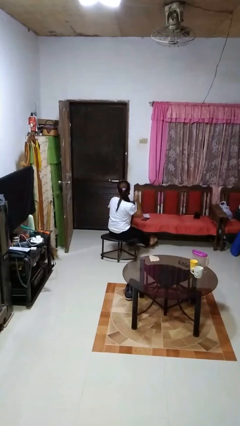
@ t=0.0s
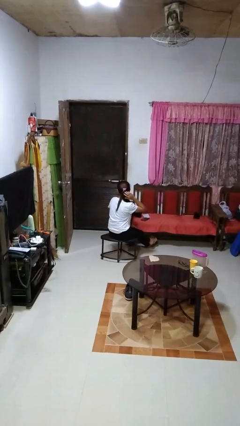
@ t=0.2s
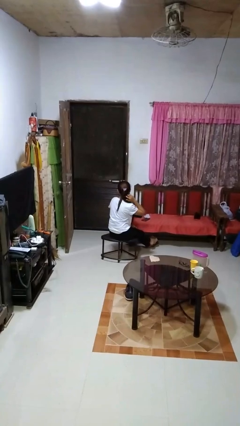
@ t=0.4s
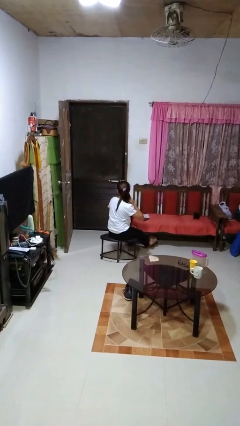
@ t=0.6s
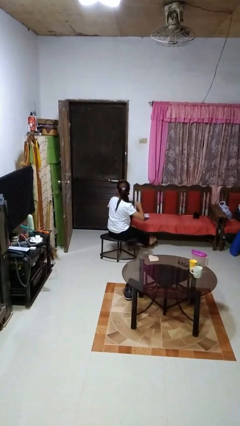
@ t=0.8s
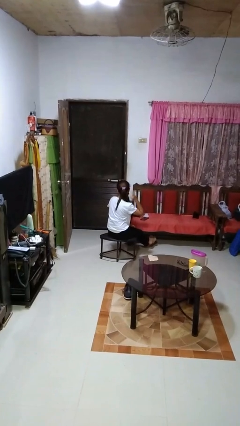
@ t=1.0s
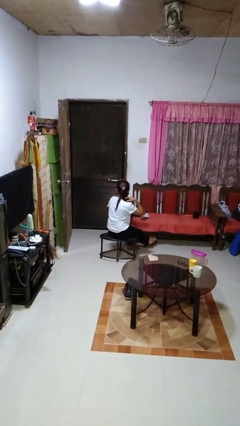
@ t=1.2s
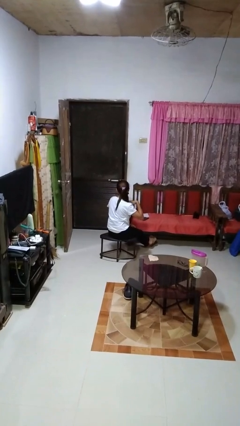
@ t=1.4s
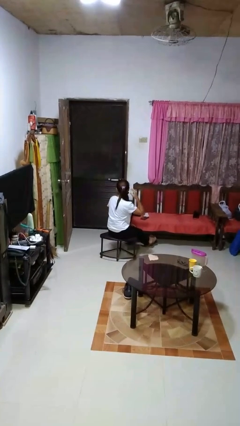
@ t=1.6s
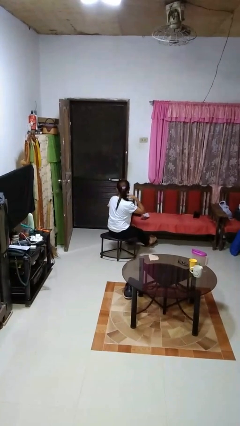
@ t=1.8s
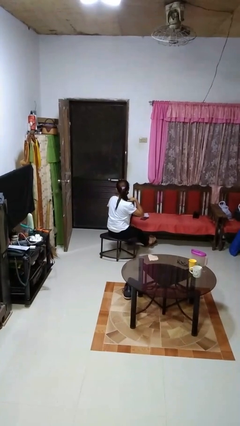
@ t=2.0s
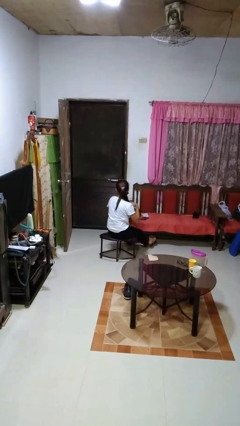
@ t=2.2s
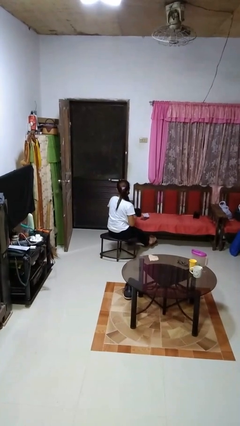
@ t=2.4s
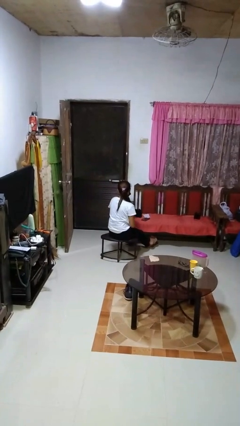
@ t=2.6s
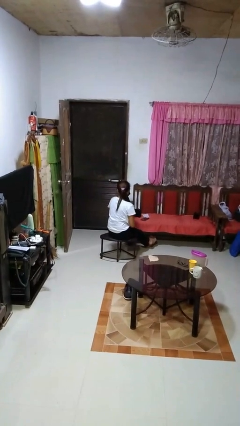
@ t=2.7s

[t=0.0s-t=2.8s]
person strokes hair

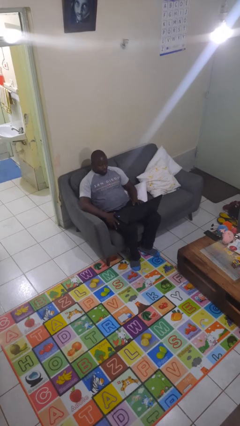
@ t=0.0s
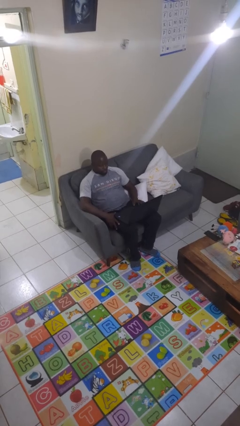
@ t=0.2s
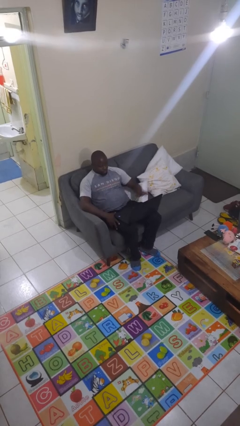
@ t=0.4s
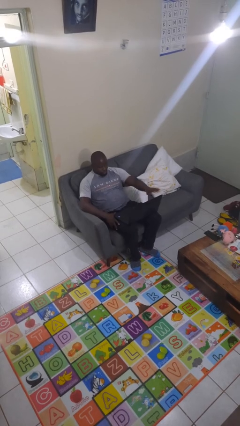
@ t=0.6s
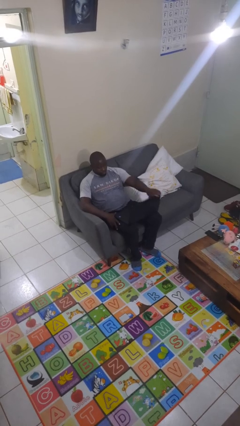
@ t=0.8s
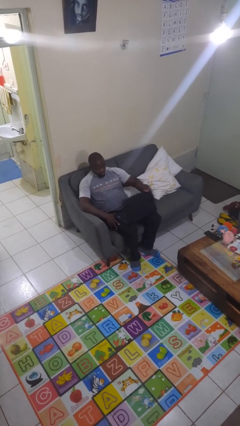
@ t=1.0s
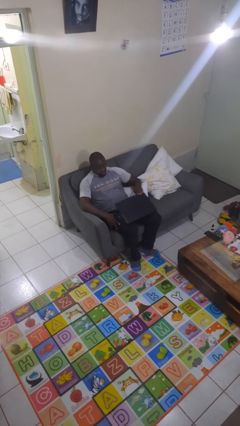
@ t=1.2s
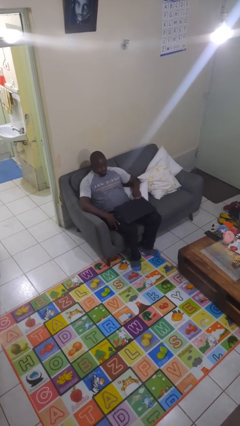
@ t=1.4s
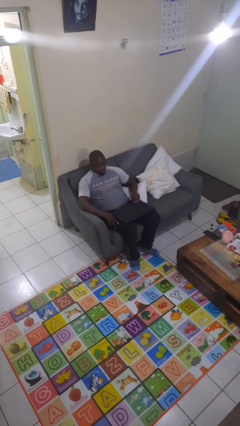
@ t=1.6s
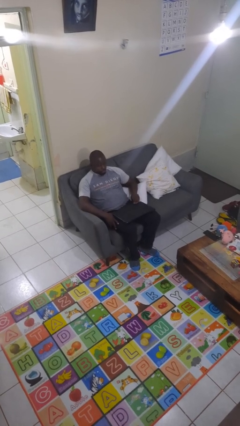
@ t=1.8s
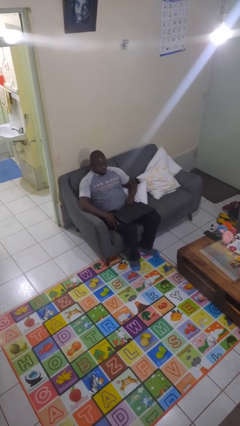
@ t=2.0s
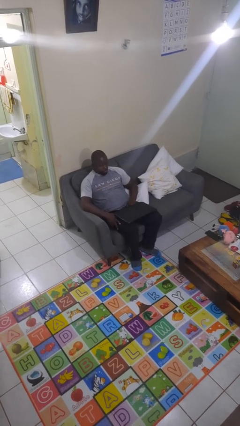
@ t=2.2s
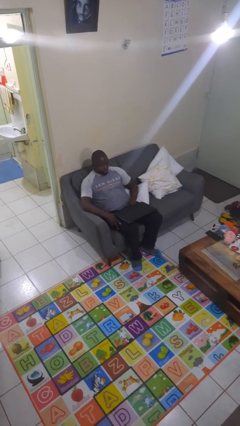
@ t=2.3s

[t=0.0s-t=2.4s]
person closes laptop

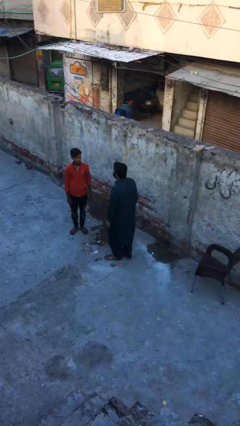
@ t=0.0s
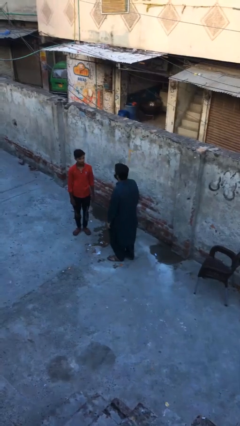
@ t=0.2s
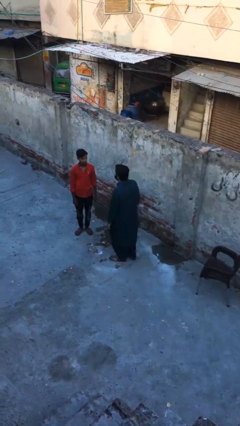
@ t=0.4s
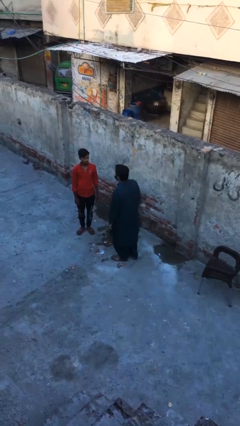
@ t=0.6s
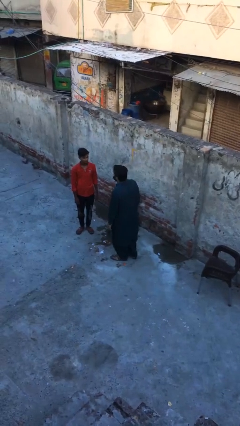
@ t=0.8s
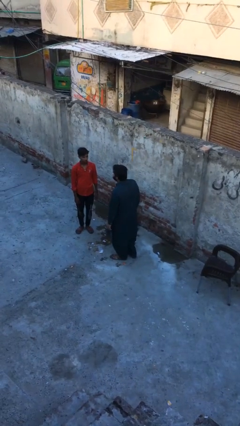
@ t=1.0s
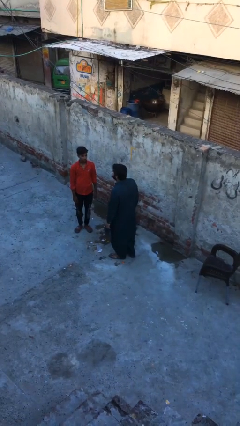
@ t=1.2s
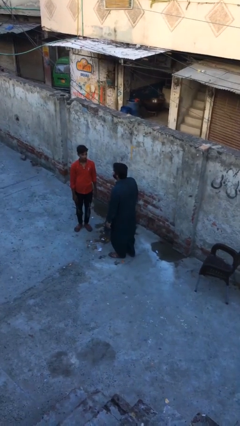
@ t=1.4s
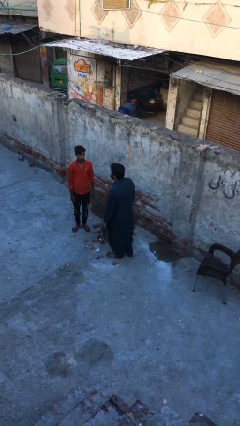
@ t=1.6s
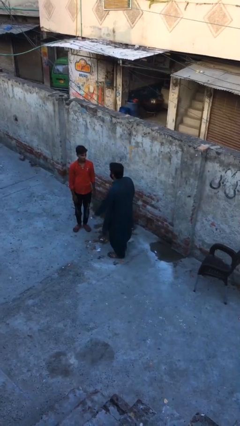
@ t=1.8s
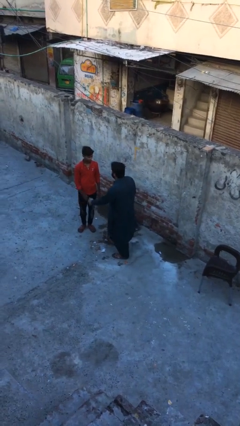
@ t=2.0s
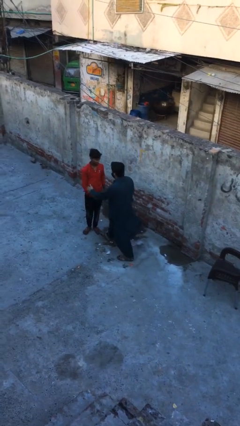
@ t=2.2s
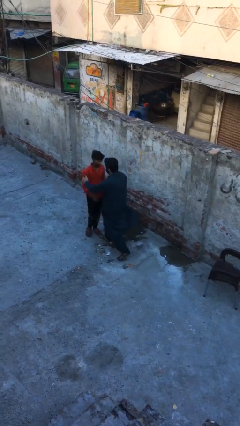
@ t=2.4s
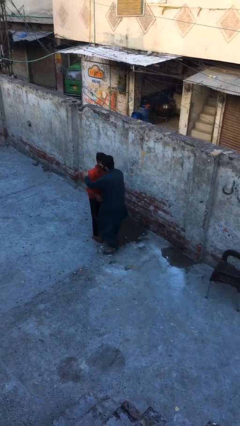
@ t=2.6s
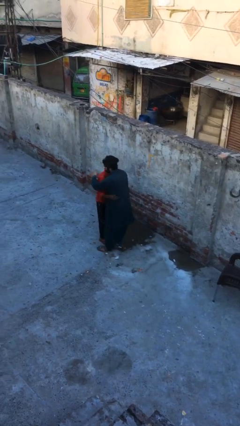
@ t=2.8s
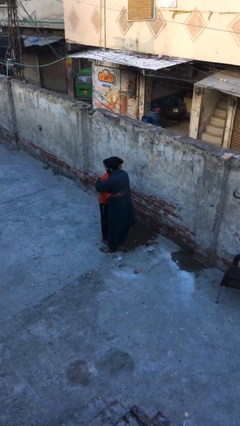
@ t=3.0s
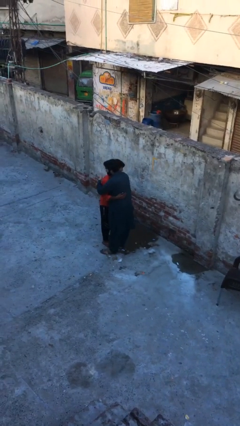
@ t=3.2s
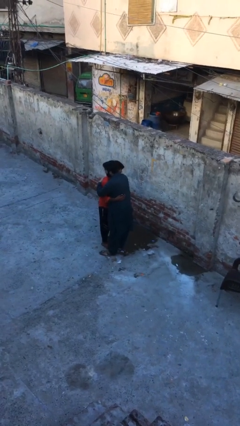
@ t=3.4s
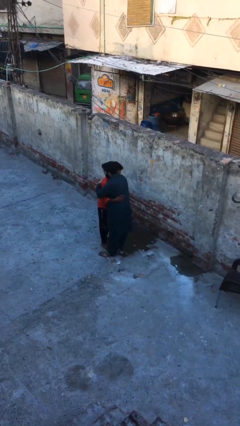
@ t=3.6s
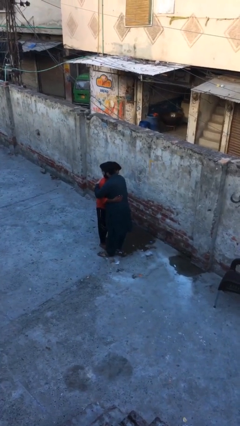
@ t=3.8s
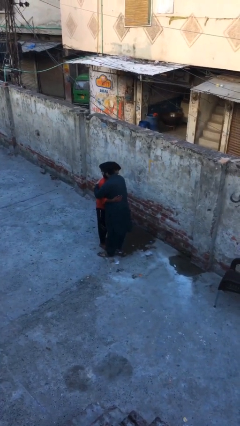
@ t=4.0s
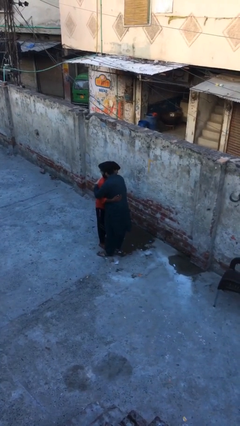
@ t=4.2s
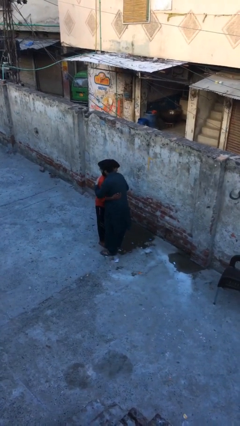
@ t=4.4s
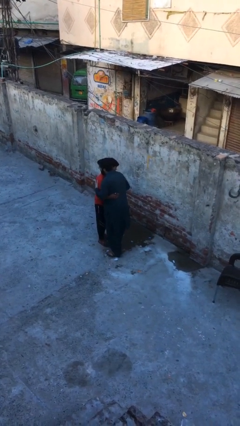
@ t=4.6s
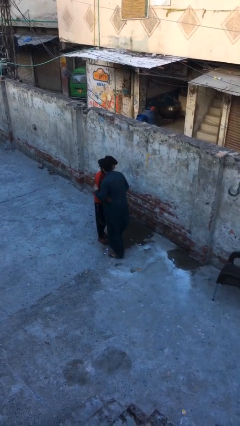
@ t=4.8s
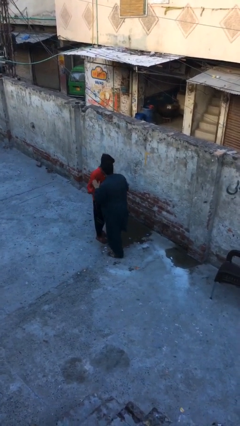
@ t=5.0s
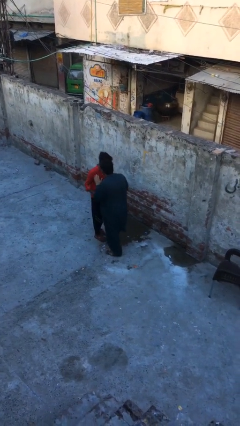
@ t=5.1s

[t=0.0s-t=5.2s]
person embraces person

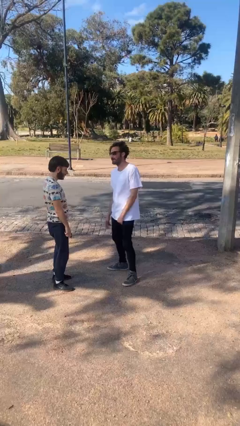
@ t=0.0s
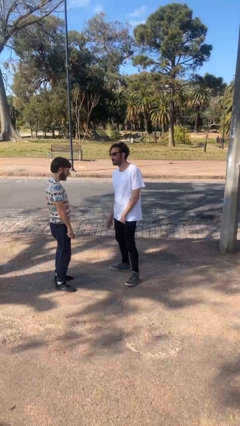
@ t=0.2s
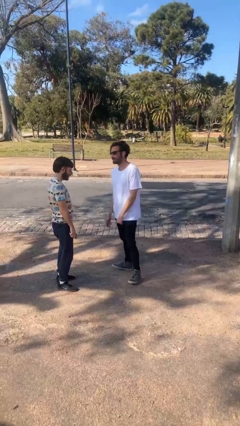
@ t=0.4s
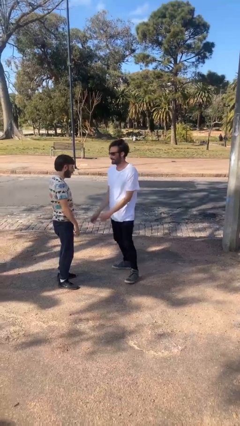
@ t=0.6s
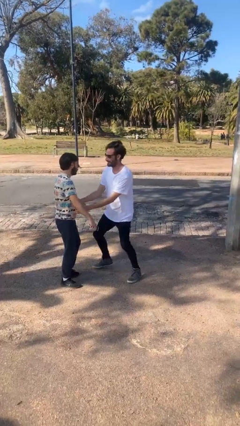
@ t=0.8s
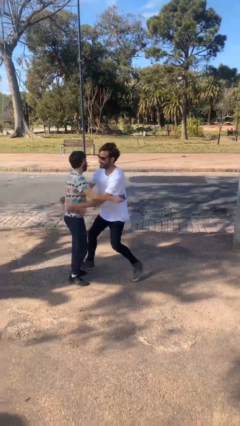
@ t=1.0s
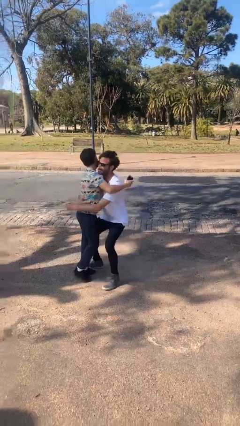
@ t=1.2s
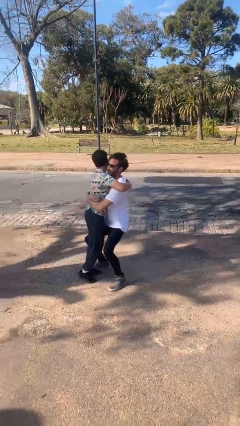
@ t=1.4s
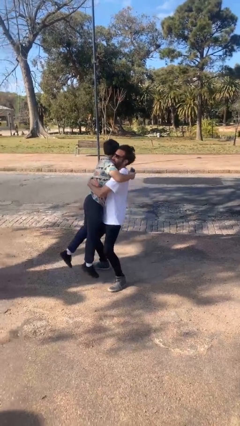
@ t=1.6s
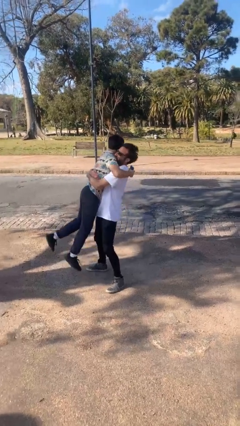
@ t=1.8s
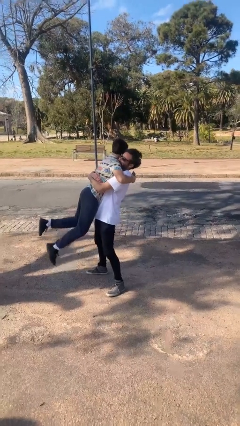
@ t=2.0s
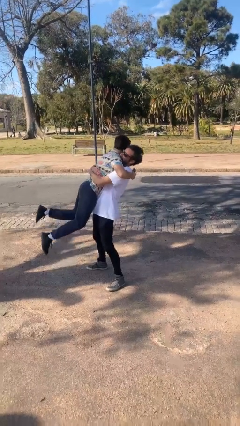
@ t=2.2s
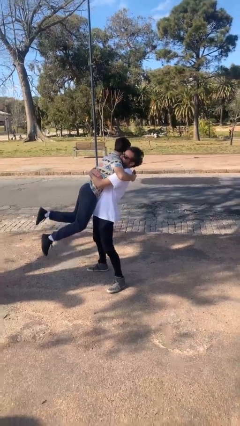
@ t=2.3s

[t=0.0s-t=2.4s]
person picks up person

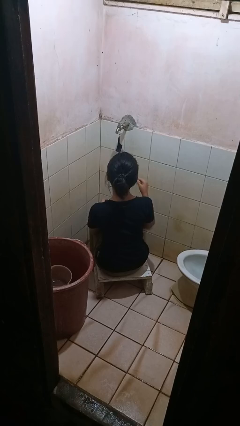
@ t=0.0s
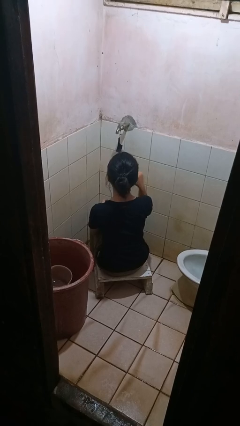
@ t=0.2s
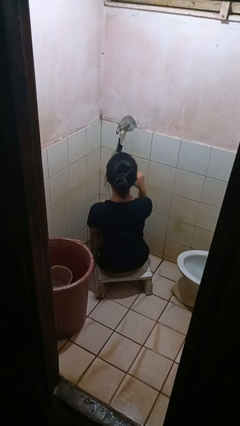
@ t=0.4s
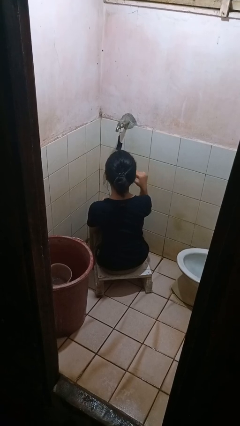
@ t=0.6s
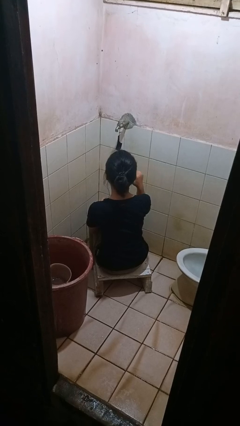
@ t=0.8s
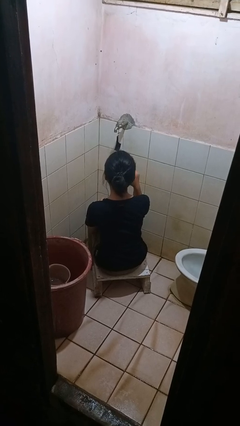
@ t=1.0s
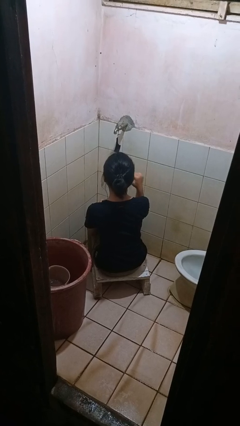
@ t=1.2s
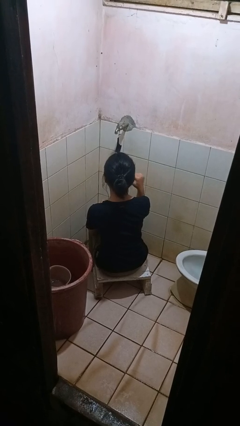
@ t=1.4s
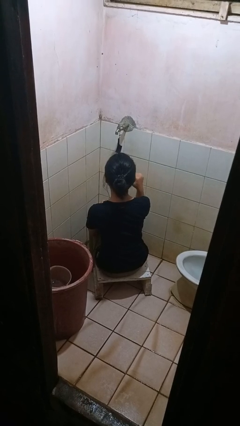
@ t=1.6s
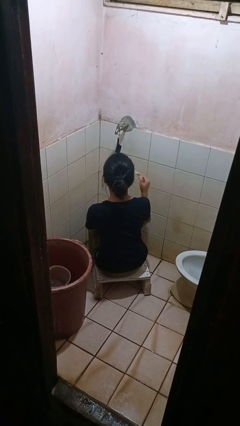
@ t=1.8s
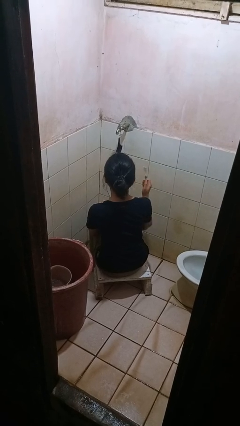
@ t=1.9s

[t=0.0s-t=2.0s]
person brushes teeth

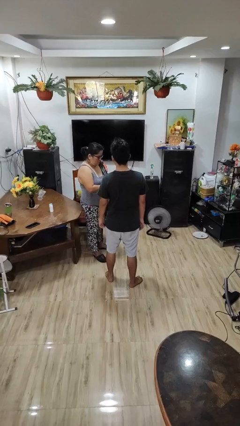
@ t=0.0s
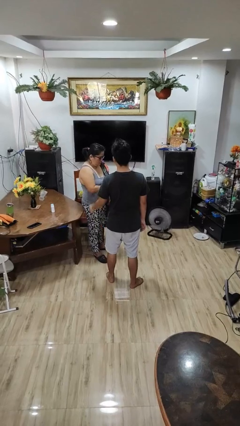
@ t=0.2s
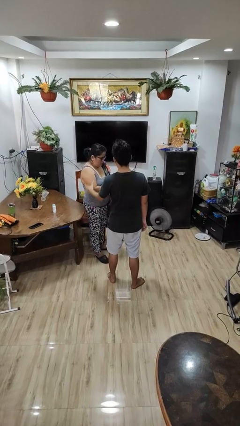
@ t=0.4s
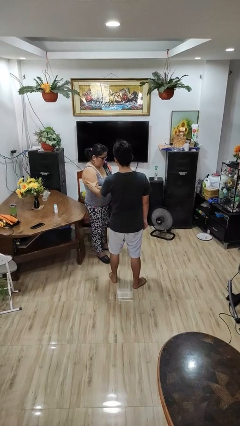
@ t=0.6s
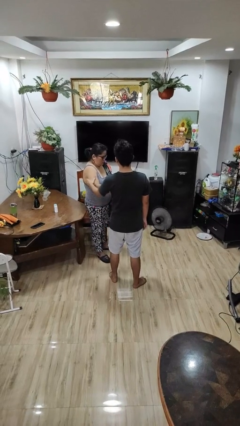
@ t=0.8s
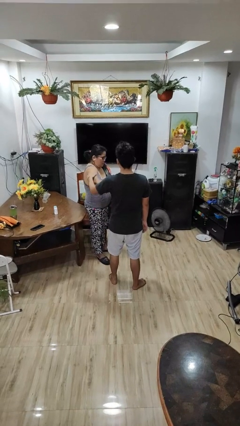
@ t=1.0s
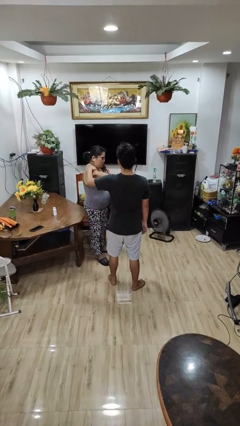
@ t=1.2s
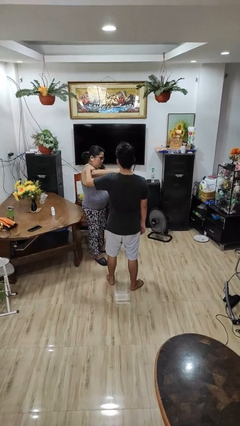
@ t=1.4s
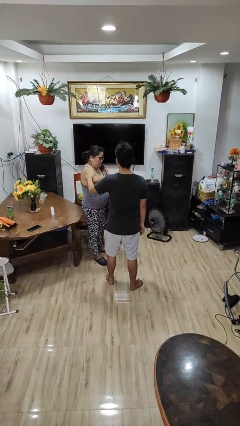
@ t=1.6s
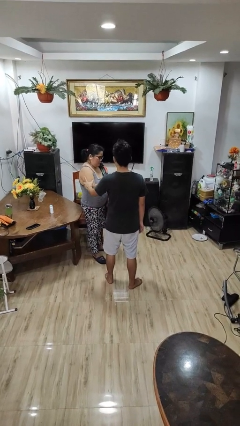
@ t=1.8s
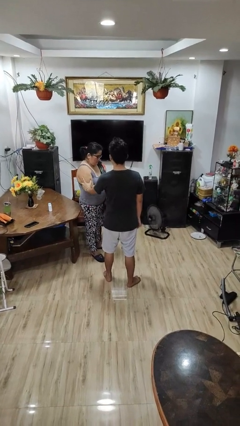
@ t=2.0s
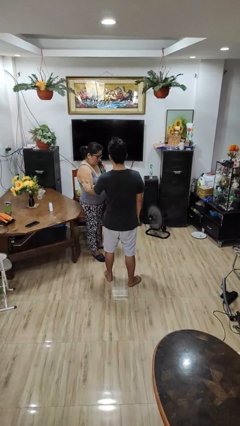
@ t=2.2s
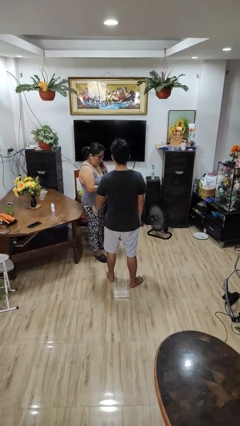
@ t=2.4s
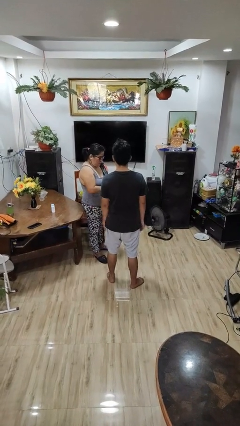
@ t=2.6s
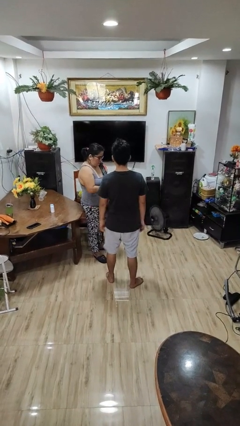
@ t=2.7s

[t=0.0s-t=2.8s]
person grabs person by bicep
